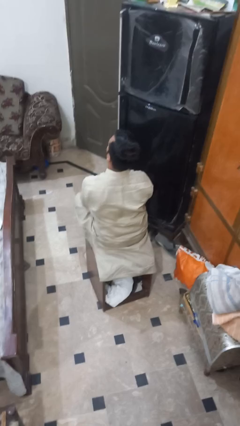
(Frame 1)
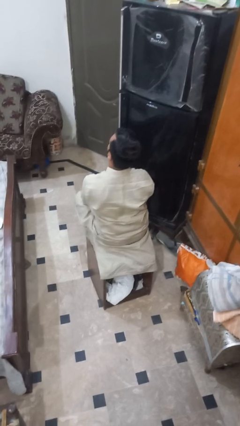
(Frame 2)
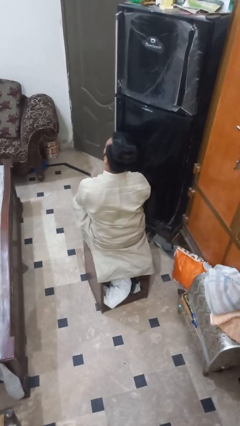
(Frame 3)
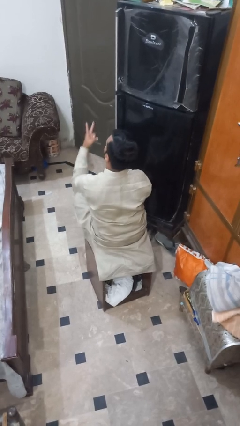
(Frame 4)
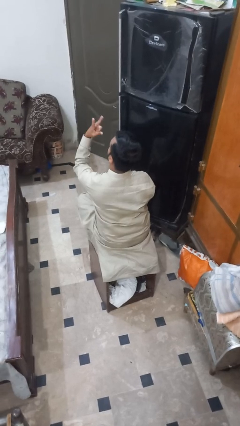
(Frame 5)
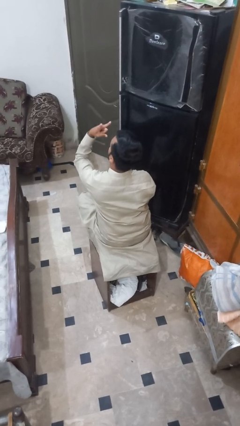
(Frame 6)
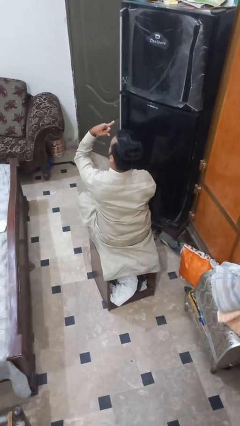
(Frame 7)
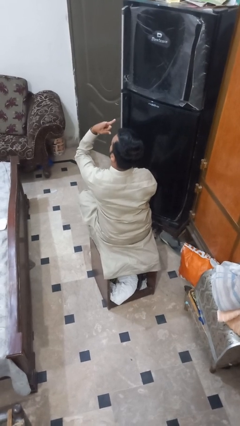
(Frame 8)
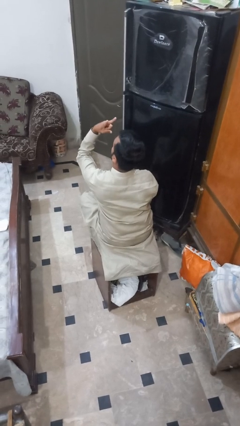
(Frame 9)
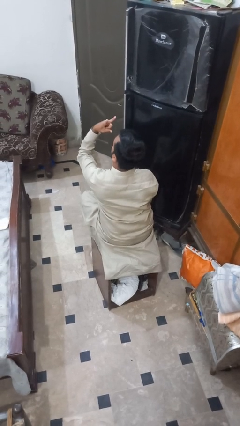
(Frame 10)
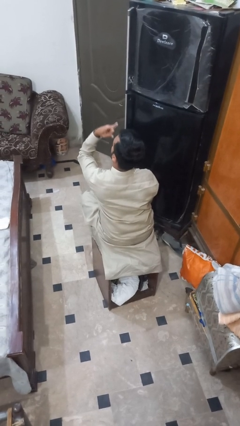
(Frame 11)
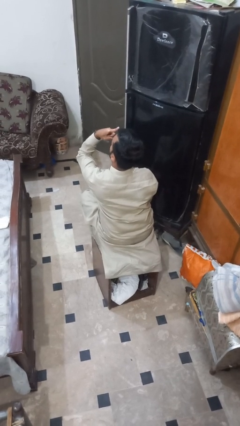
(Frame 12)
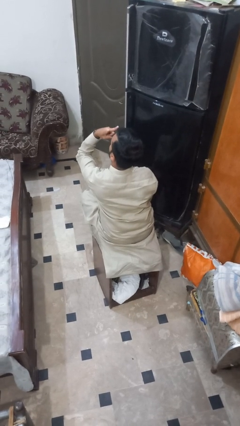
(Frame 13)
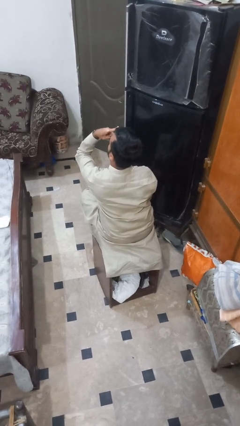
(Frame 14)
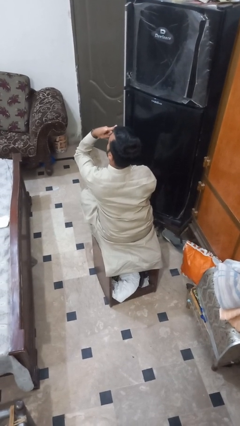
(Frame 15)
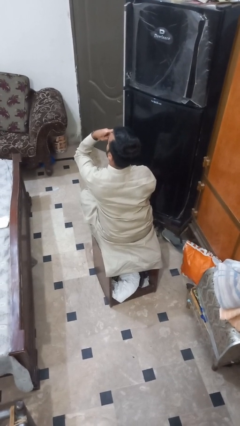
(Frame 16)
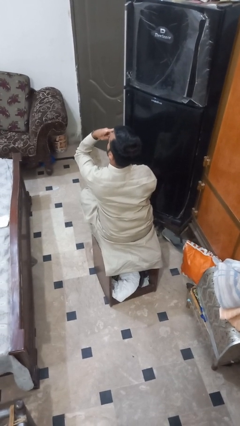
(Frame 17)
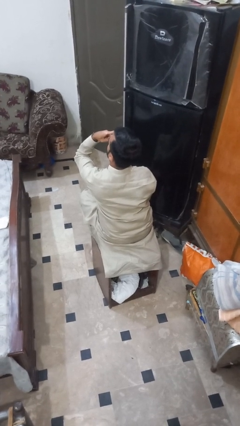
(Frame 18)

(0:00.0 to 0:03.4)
person gestures watch closely

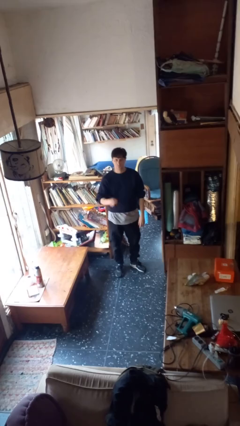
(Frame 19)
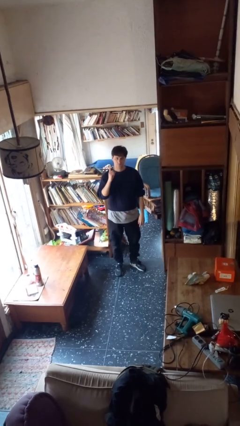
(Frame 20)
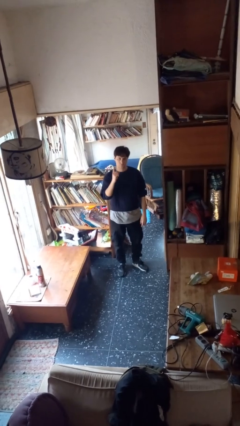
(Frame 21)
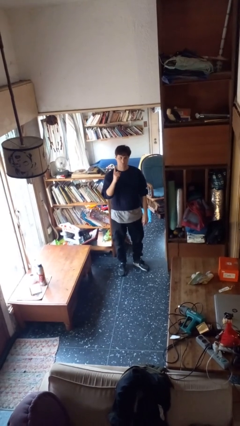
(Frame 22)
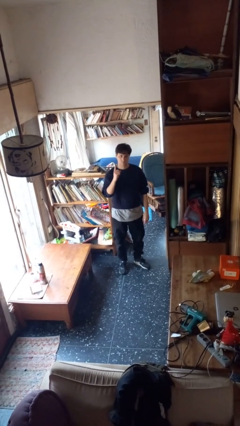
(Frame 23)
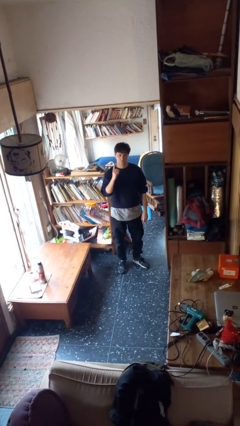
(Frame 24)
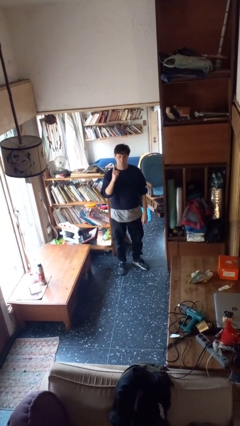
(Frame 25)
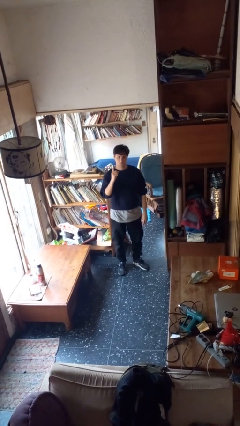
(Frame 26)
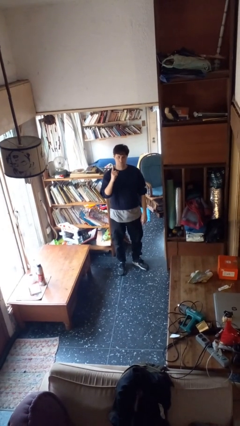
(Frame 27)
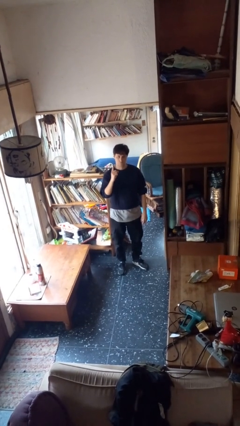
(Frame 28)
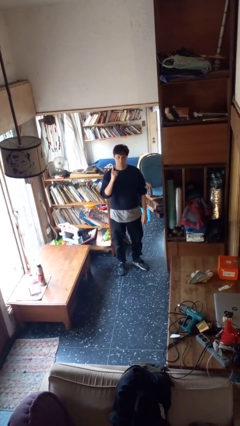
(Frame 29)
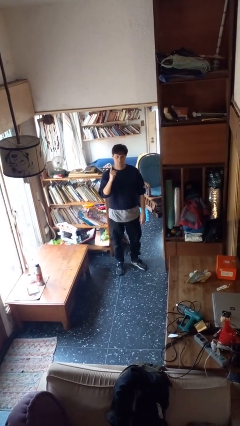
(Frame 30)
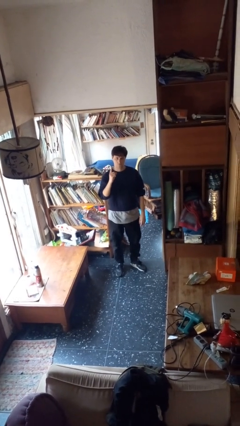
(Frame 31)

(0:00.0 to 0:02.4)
person gestures number one

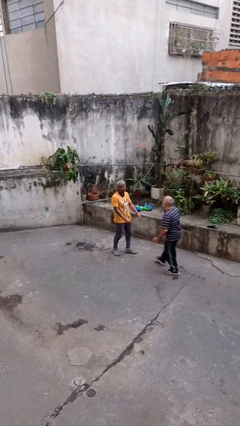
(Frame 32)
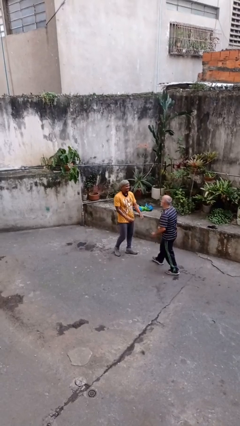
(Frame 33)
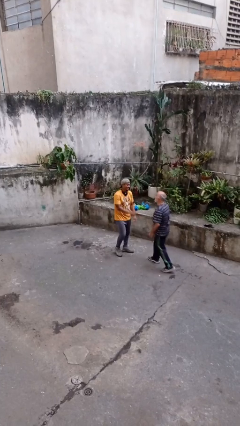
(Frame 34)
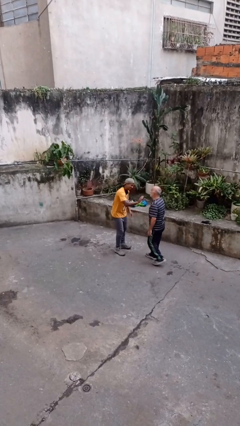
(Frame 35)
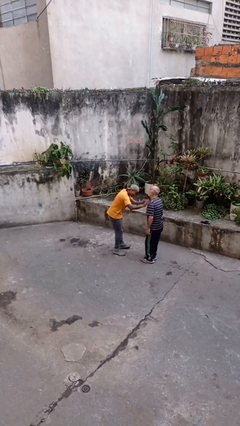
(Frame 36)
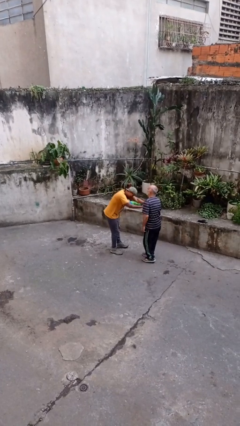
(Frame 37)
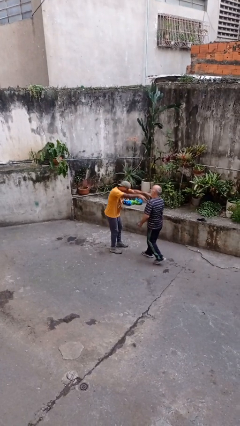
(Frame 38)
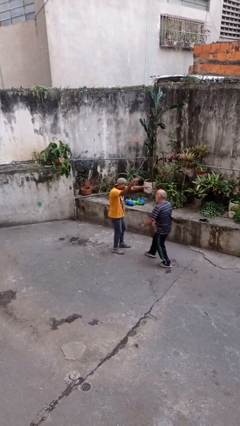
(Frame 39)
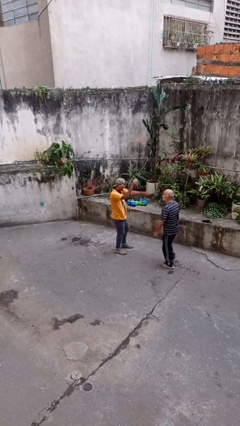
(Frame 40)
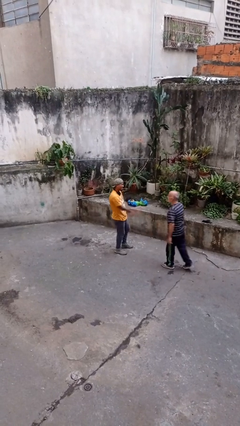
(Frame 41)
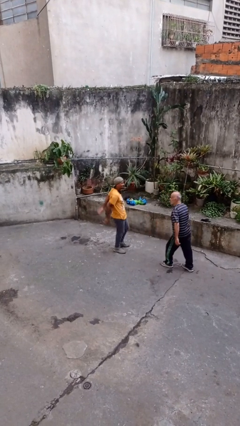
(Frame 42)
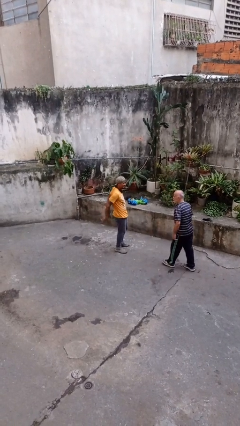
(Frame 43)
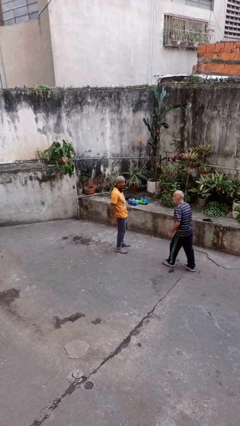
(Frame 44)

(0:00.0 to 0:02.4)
person shoves person

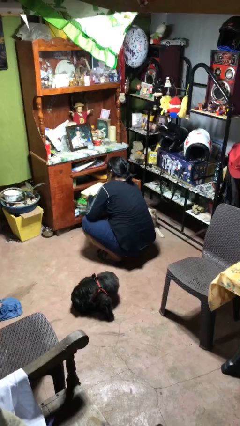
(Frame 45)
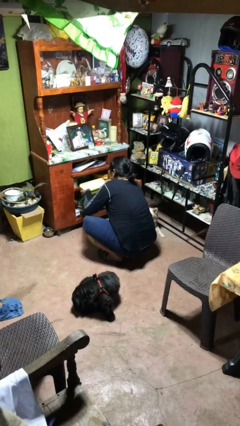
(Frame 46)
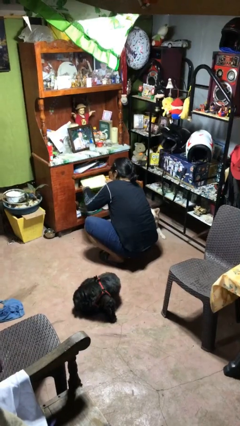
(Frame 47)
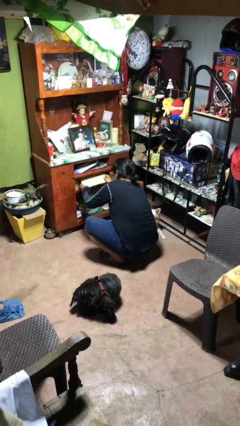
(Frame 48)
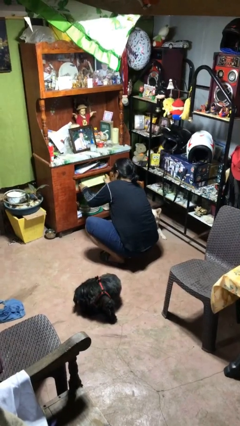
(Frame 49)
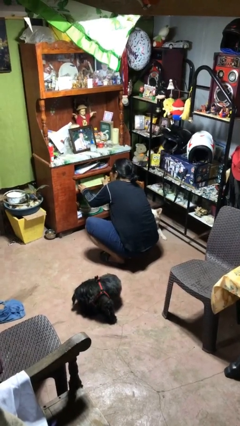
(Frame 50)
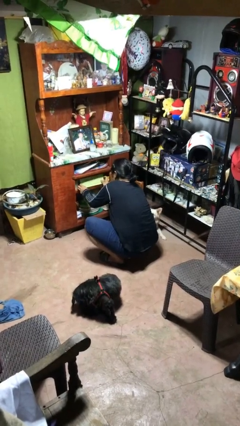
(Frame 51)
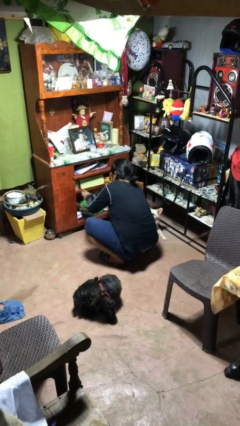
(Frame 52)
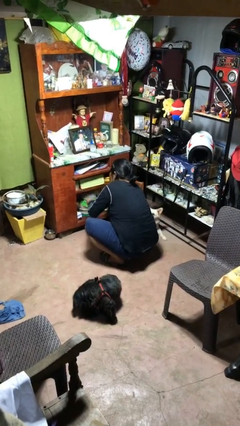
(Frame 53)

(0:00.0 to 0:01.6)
person puts down object into cabinet

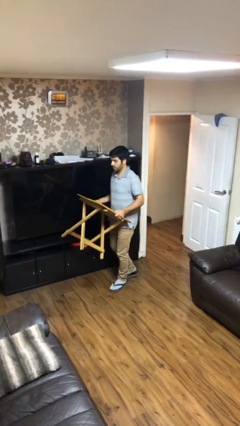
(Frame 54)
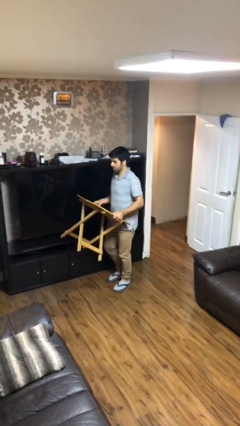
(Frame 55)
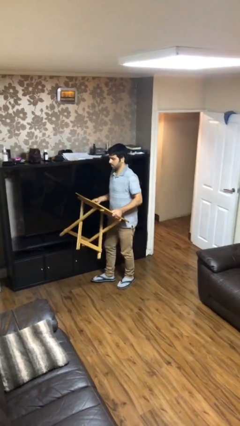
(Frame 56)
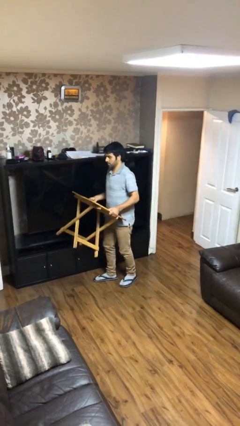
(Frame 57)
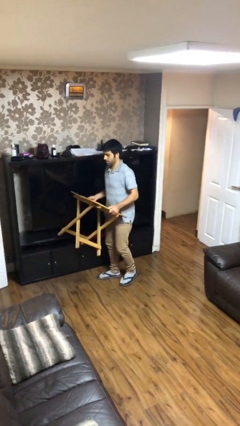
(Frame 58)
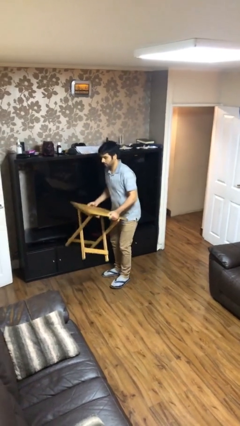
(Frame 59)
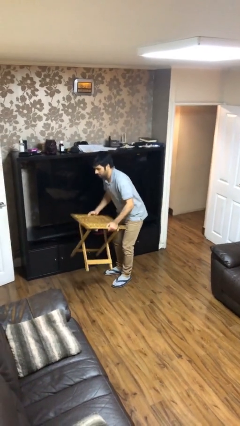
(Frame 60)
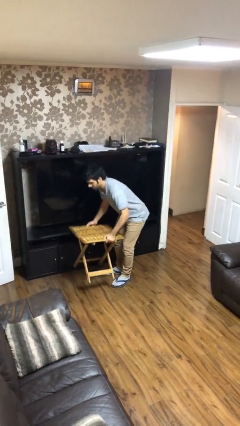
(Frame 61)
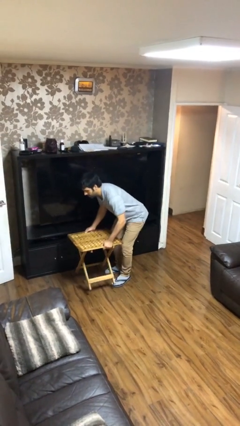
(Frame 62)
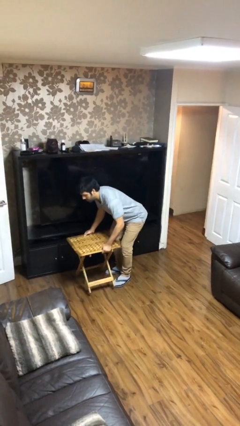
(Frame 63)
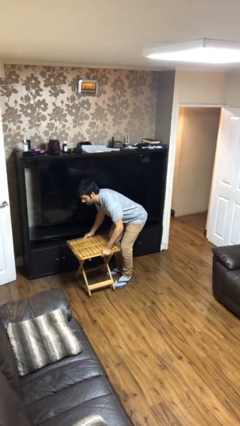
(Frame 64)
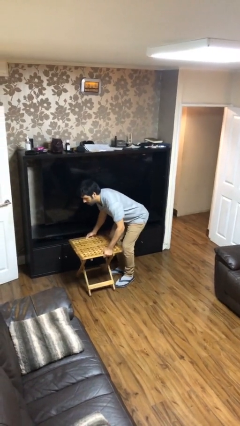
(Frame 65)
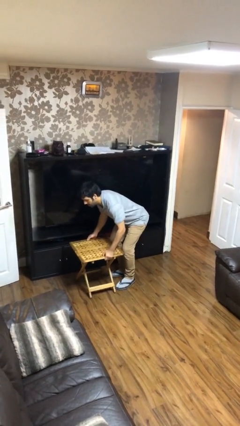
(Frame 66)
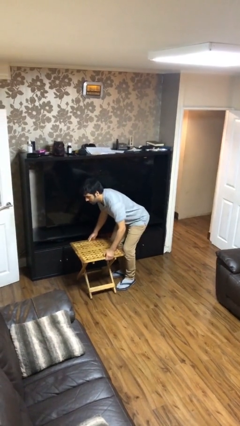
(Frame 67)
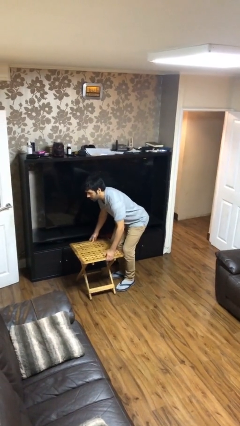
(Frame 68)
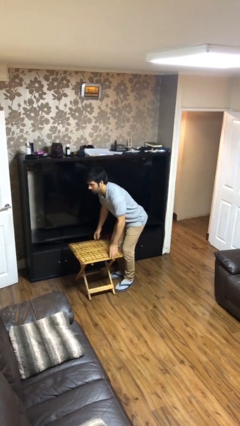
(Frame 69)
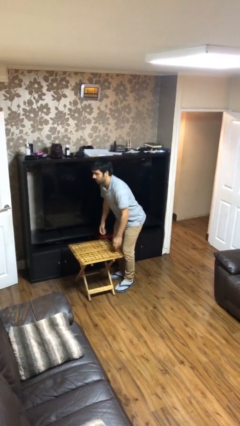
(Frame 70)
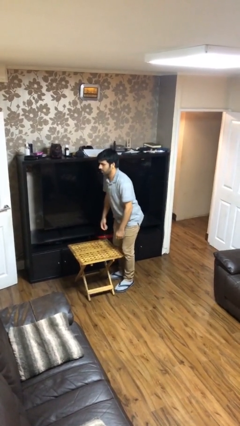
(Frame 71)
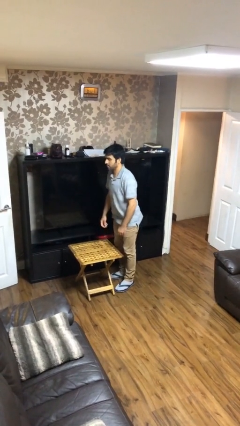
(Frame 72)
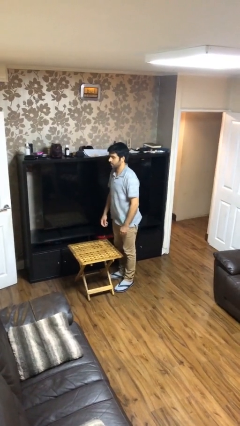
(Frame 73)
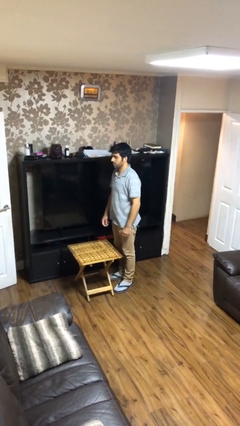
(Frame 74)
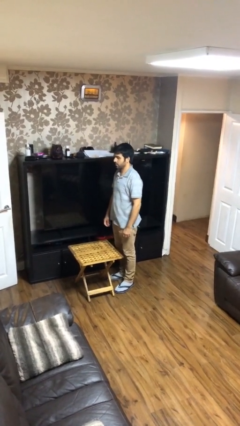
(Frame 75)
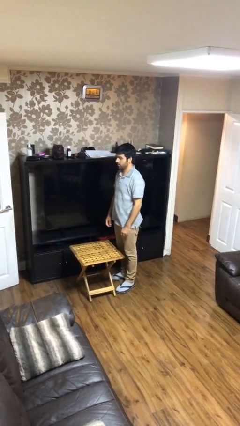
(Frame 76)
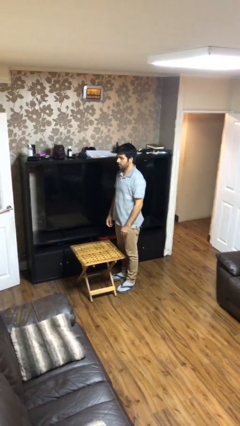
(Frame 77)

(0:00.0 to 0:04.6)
person puts down object on floor

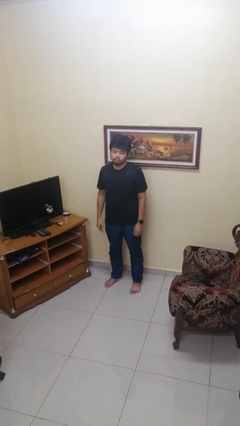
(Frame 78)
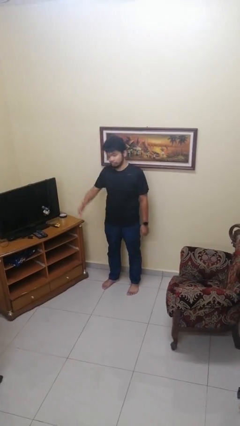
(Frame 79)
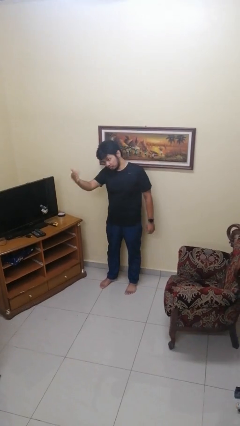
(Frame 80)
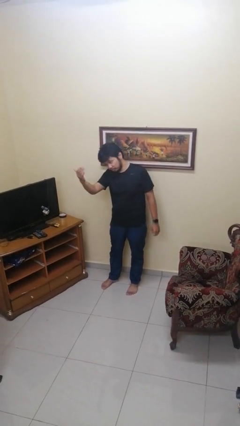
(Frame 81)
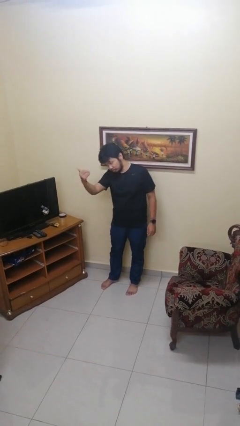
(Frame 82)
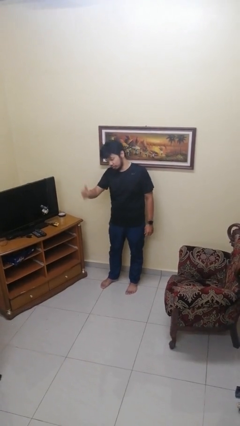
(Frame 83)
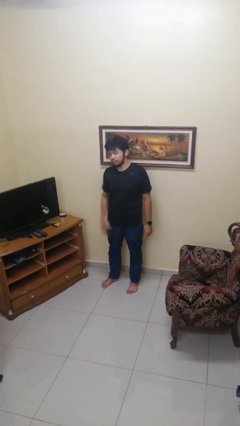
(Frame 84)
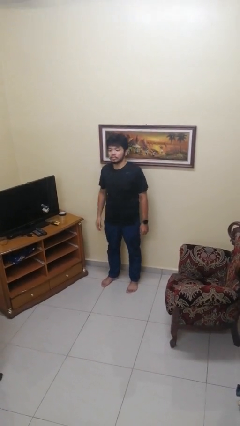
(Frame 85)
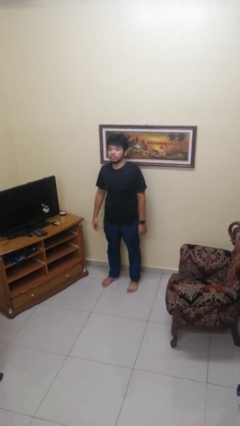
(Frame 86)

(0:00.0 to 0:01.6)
person gestures come here

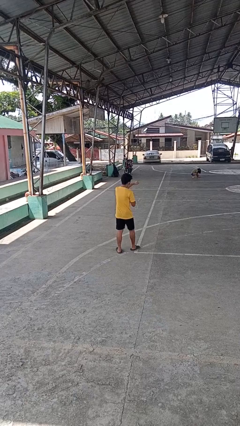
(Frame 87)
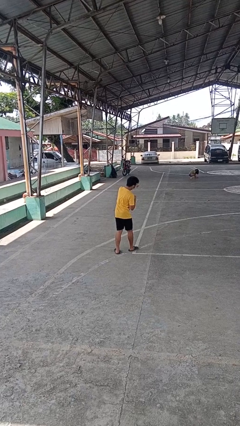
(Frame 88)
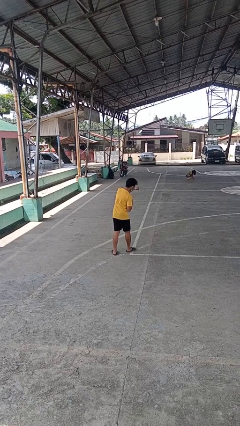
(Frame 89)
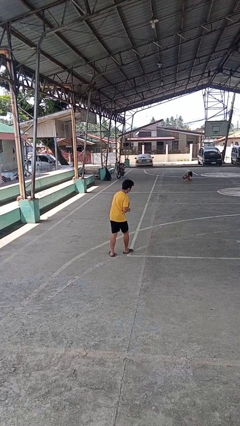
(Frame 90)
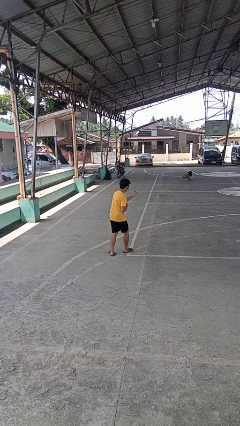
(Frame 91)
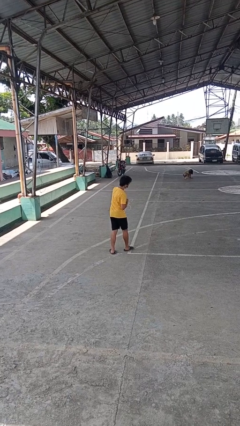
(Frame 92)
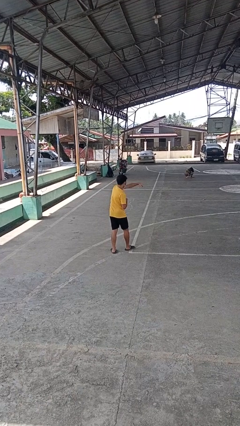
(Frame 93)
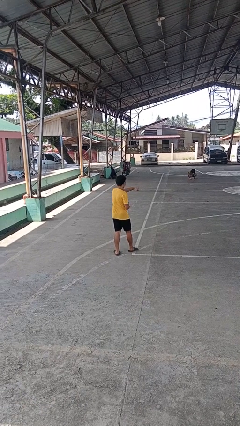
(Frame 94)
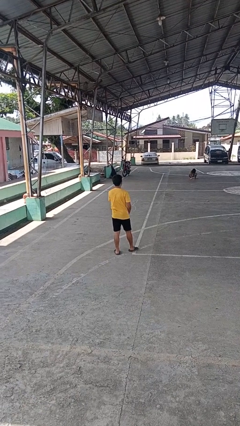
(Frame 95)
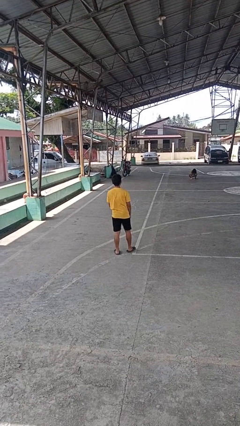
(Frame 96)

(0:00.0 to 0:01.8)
person punches
